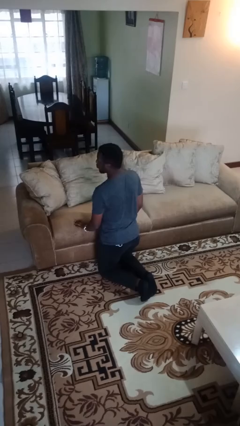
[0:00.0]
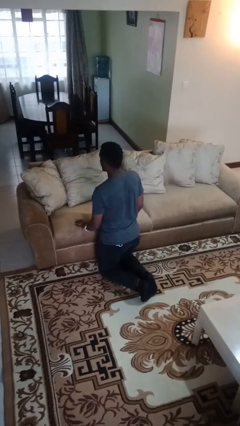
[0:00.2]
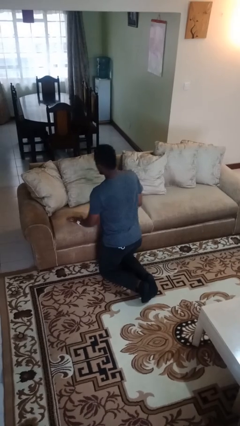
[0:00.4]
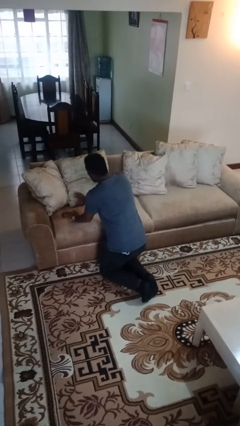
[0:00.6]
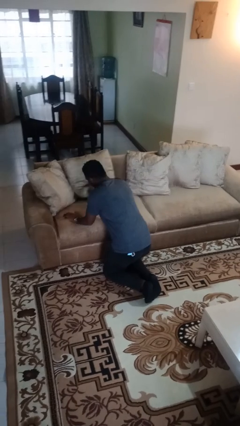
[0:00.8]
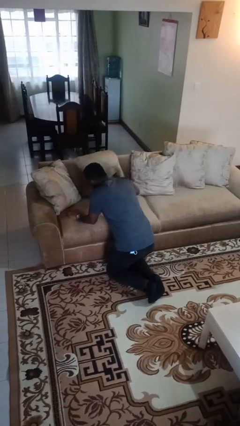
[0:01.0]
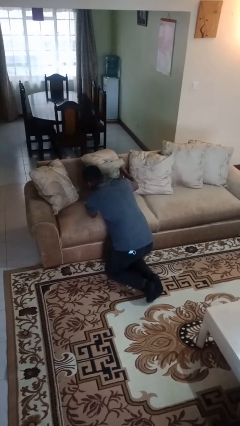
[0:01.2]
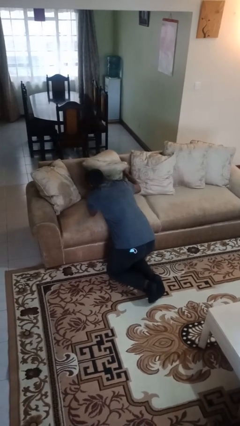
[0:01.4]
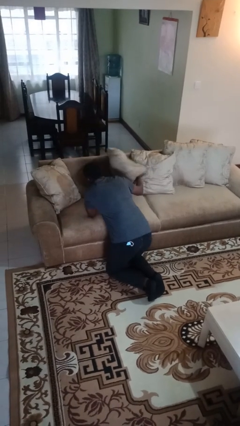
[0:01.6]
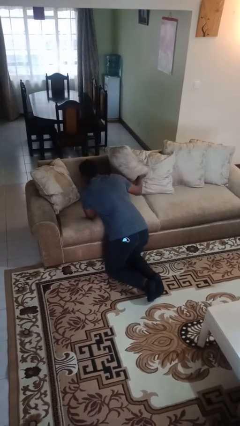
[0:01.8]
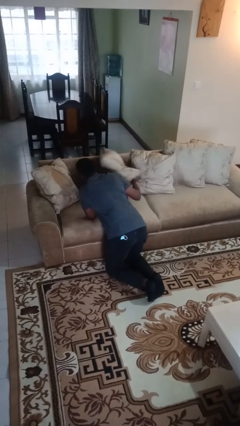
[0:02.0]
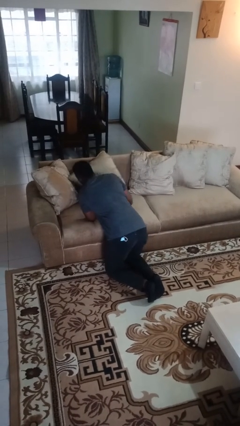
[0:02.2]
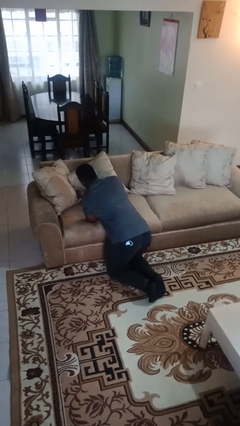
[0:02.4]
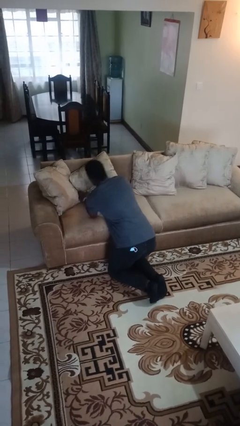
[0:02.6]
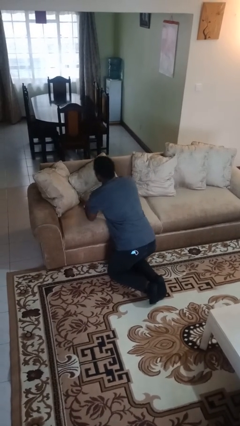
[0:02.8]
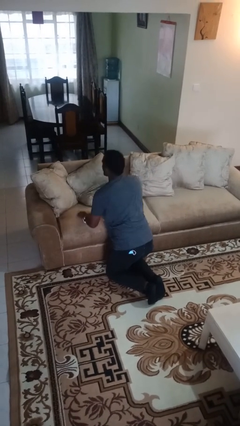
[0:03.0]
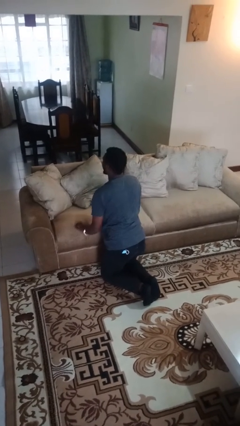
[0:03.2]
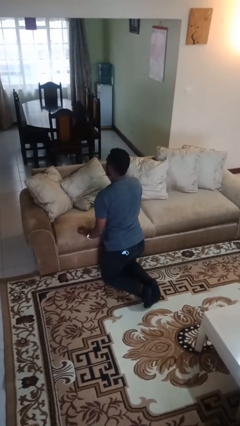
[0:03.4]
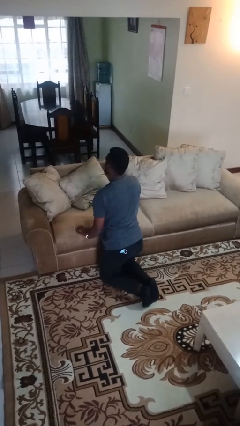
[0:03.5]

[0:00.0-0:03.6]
person searches in couch

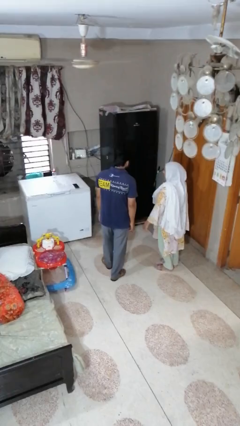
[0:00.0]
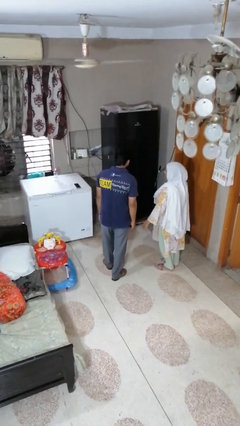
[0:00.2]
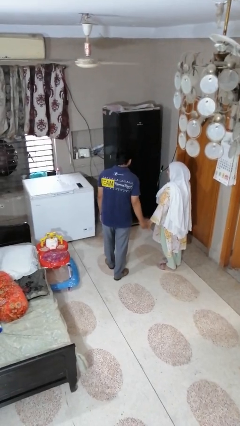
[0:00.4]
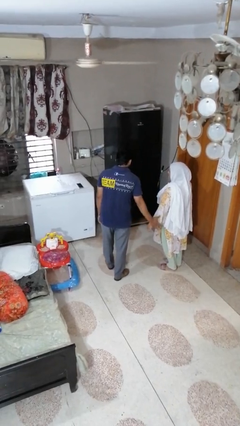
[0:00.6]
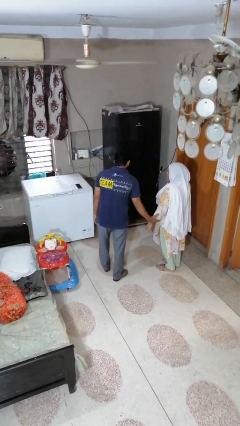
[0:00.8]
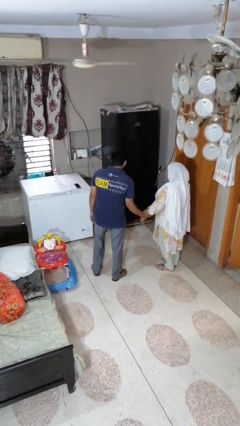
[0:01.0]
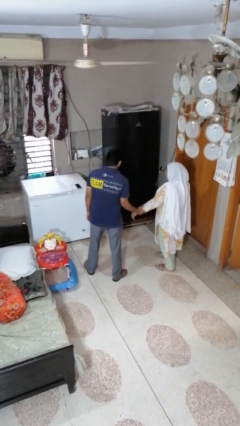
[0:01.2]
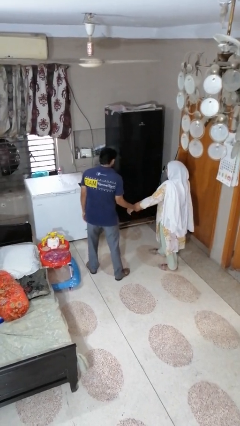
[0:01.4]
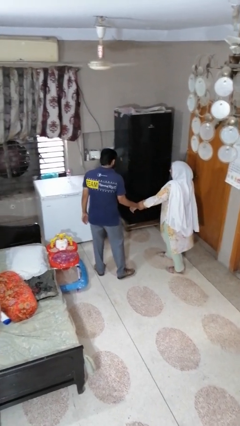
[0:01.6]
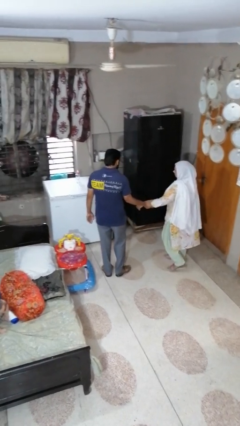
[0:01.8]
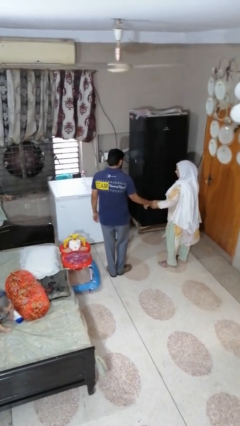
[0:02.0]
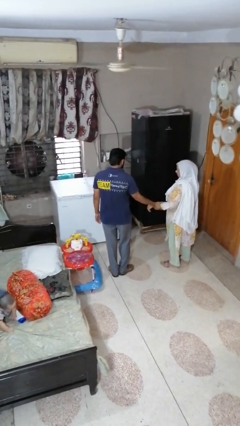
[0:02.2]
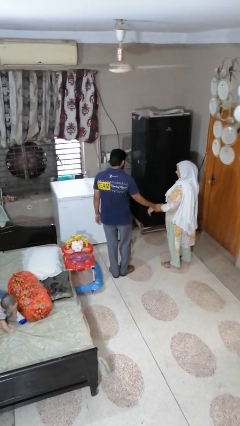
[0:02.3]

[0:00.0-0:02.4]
person grabs person by forearm

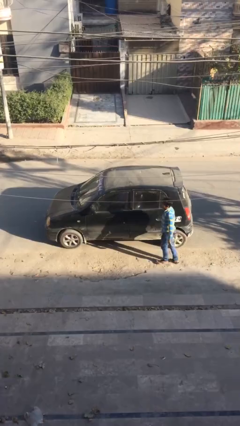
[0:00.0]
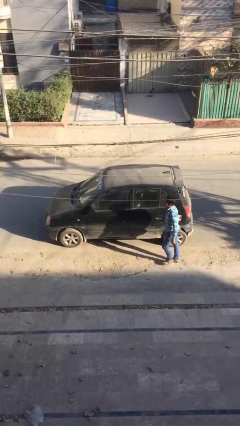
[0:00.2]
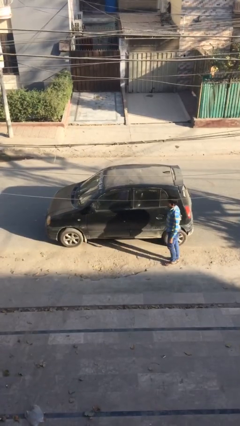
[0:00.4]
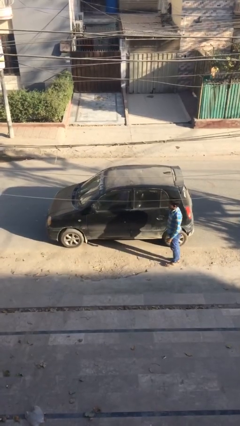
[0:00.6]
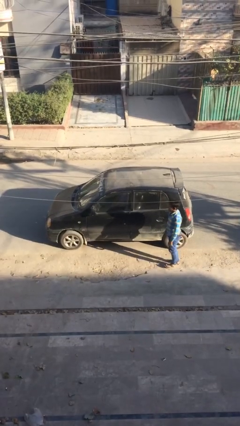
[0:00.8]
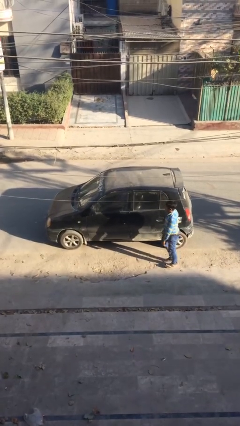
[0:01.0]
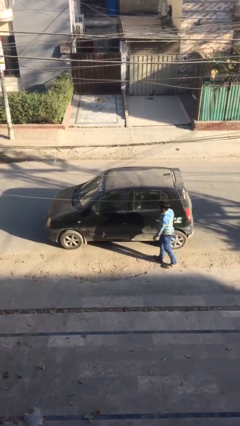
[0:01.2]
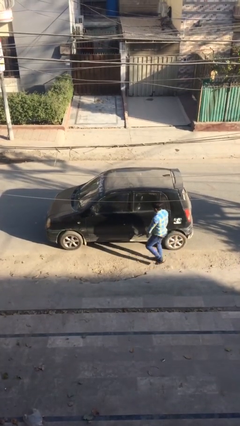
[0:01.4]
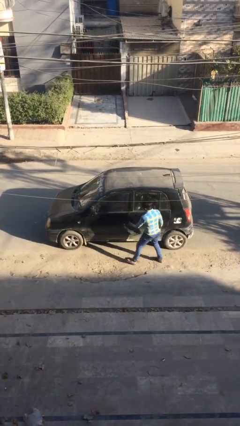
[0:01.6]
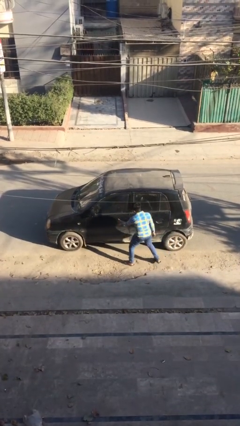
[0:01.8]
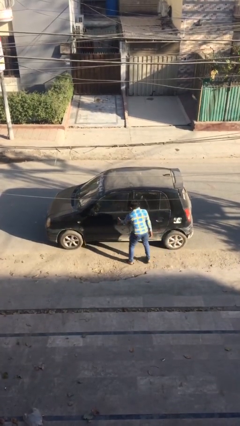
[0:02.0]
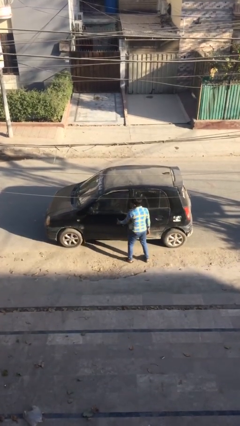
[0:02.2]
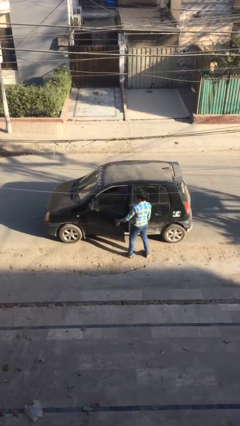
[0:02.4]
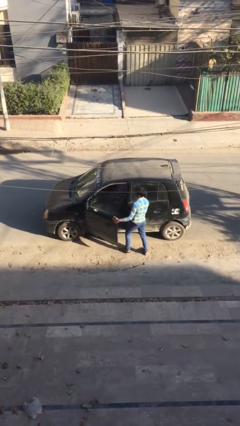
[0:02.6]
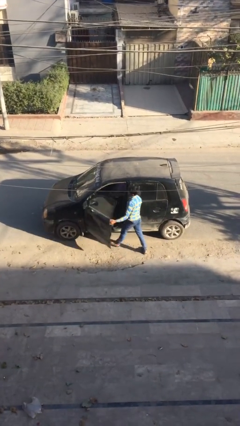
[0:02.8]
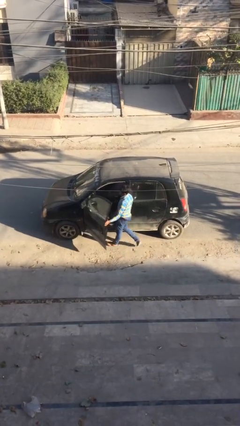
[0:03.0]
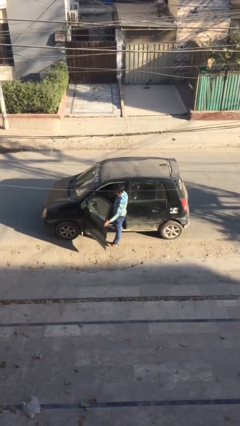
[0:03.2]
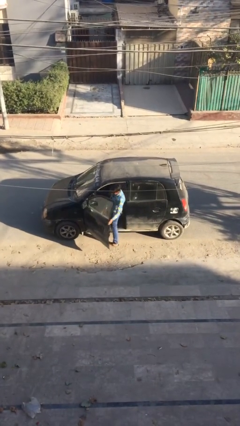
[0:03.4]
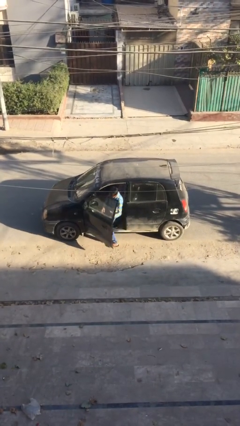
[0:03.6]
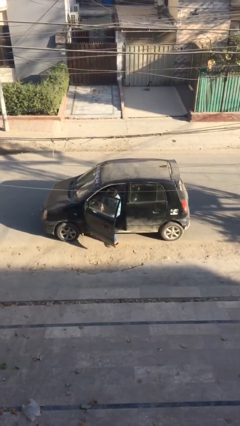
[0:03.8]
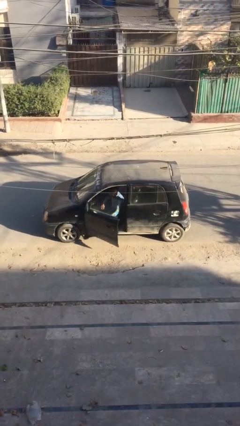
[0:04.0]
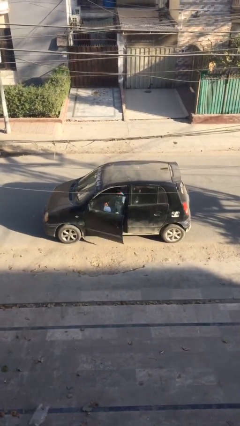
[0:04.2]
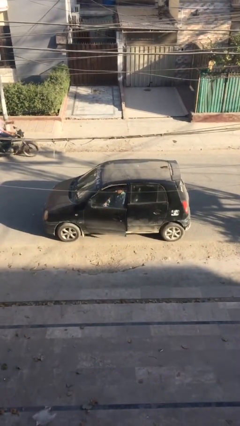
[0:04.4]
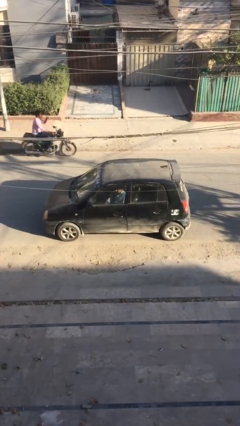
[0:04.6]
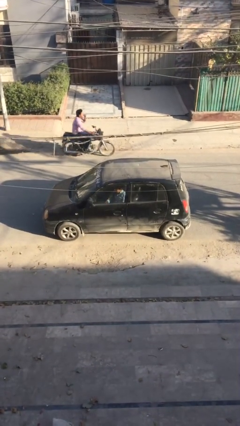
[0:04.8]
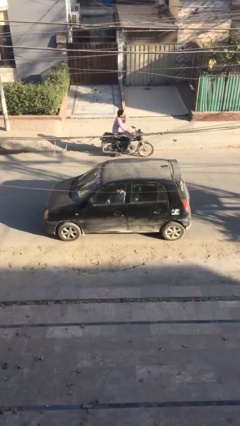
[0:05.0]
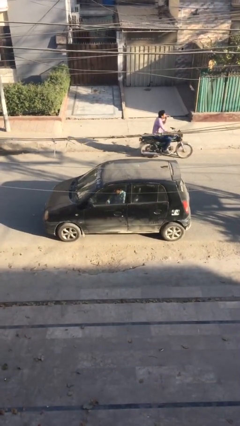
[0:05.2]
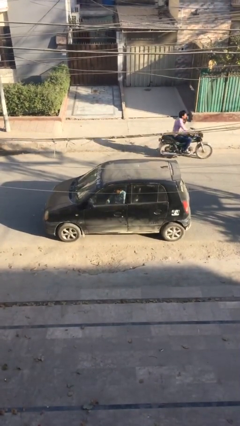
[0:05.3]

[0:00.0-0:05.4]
car picks up person

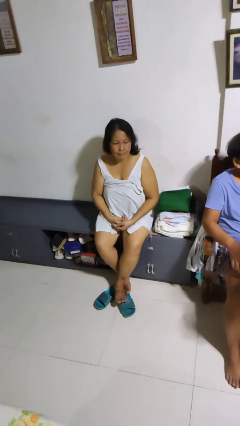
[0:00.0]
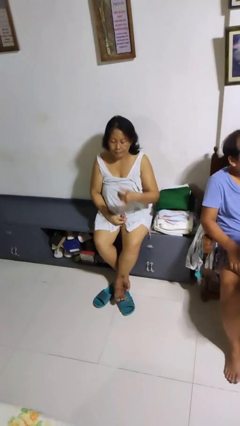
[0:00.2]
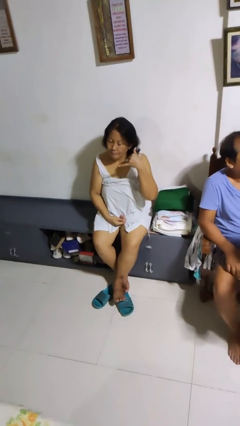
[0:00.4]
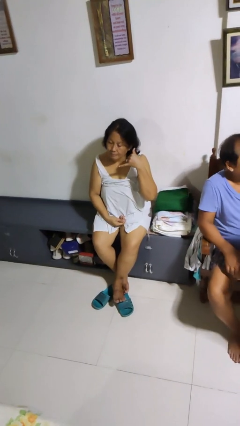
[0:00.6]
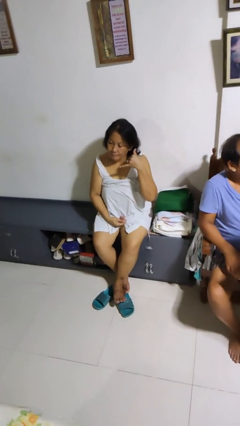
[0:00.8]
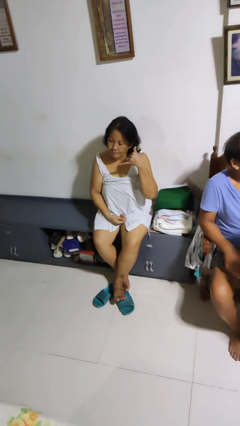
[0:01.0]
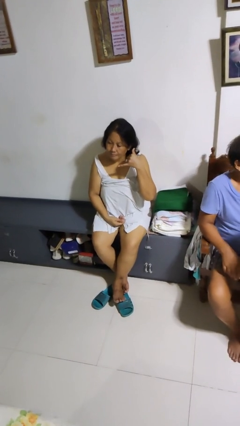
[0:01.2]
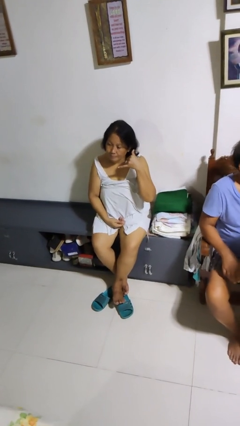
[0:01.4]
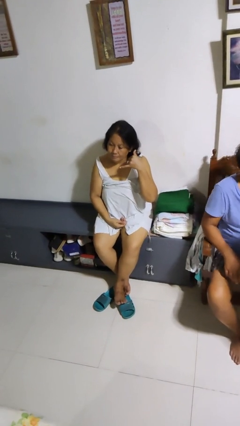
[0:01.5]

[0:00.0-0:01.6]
person gestures call me

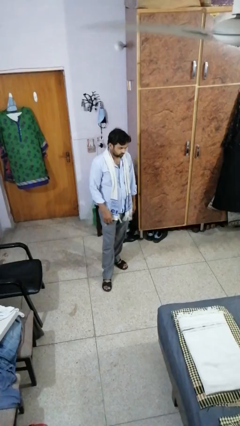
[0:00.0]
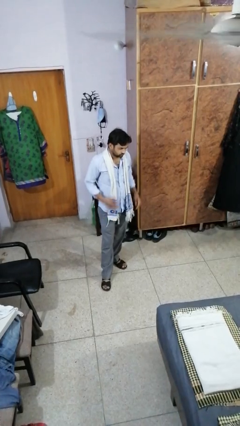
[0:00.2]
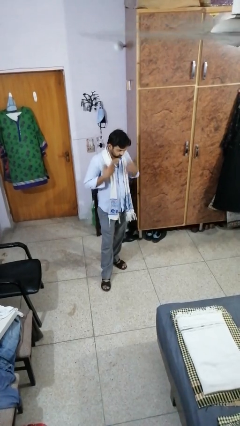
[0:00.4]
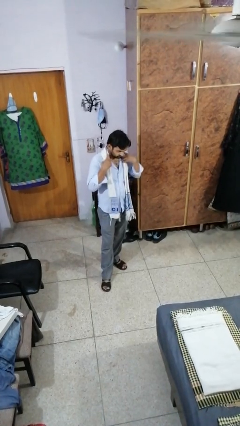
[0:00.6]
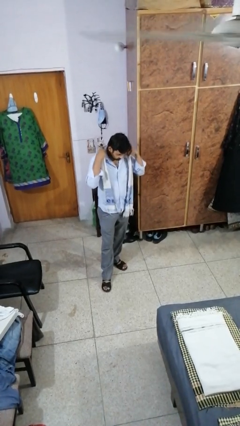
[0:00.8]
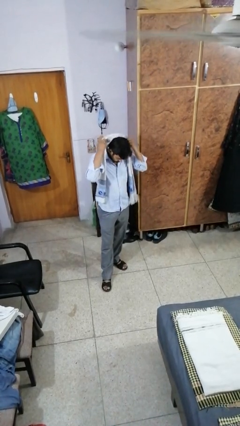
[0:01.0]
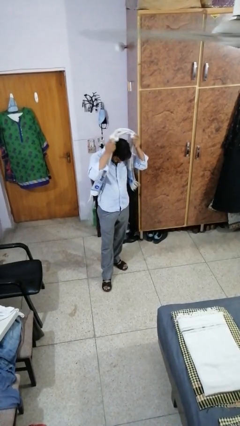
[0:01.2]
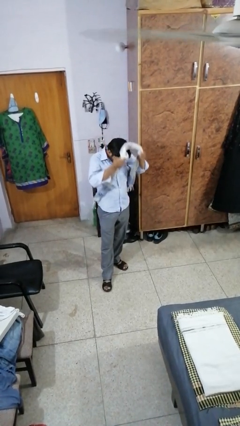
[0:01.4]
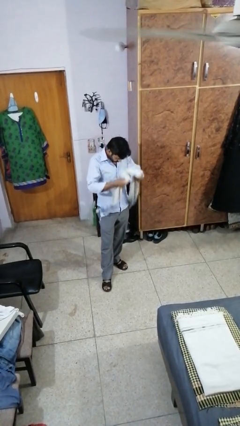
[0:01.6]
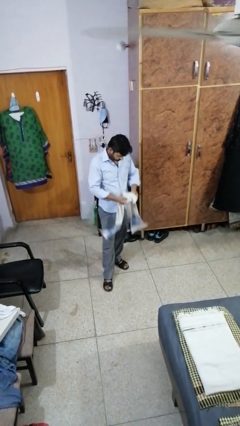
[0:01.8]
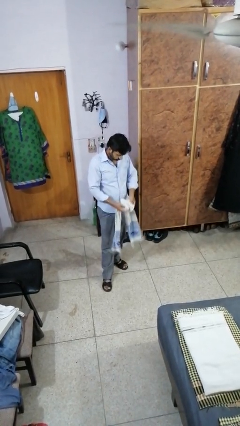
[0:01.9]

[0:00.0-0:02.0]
person takes off scarf

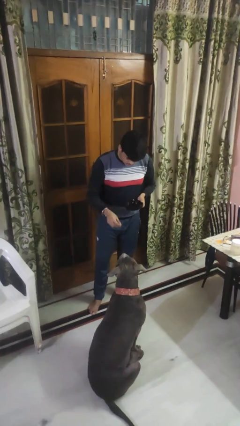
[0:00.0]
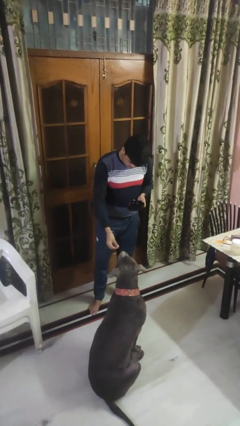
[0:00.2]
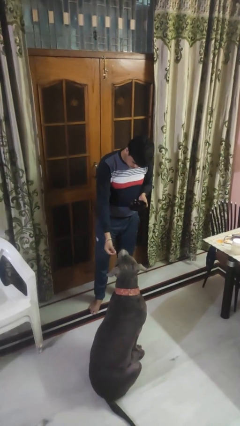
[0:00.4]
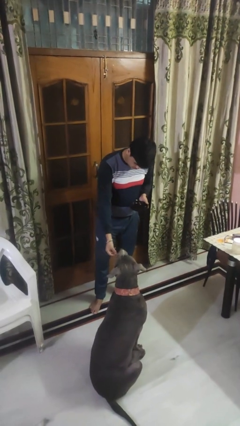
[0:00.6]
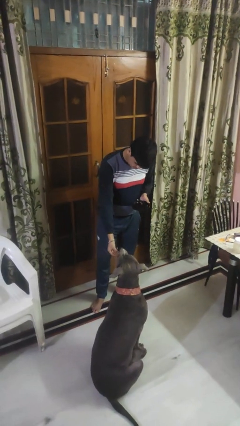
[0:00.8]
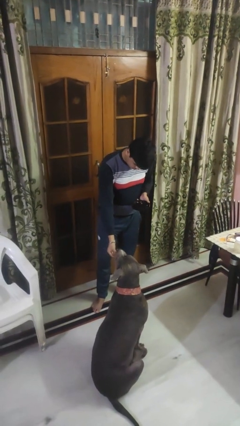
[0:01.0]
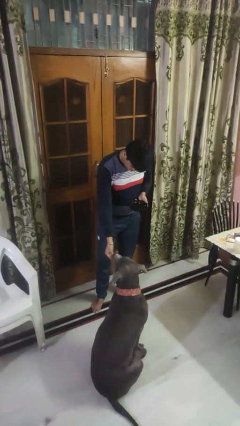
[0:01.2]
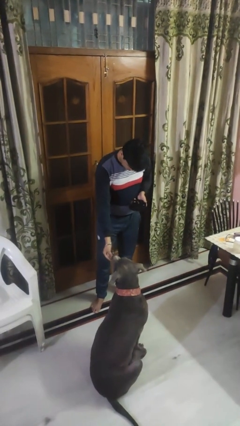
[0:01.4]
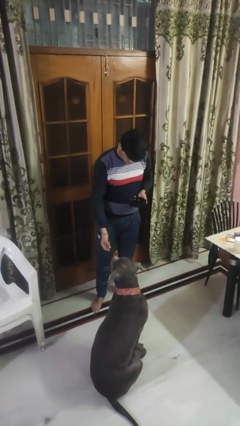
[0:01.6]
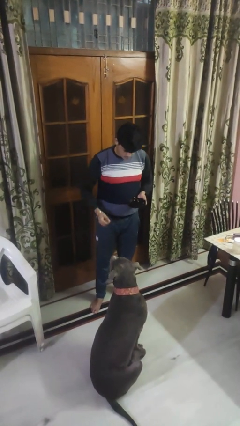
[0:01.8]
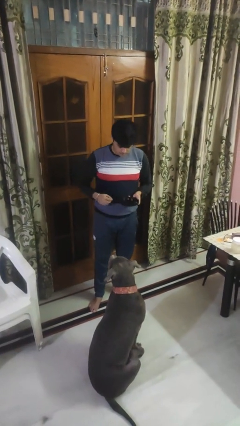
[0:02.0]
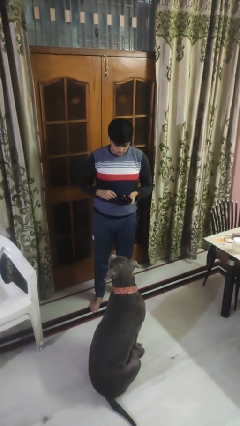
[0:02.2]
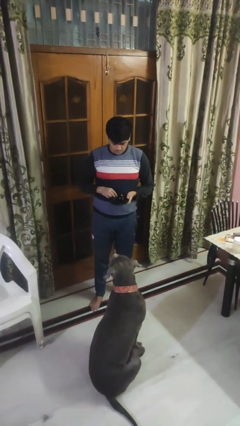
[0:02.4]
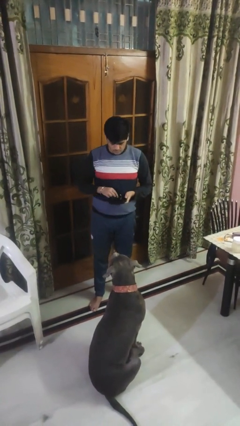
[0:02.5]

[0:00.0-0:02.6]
person feeds dog
